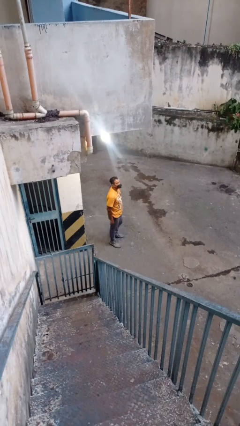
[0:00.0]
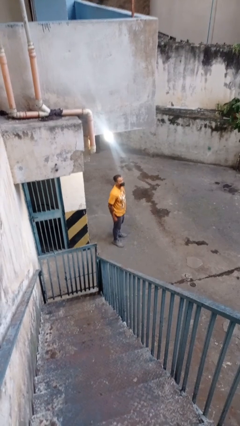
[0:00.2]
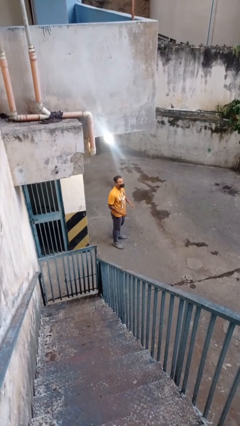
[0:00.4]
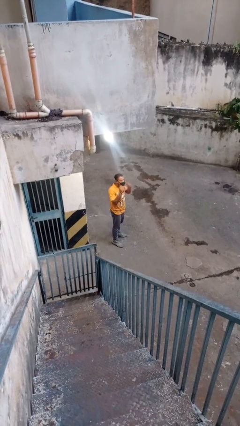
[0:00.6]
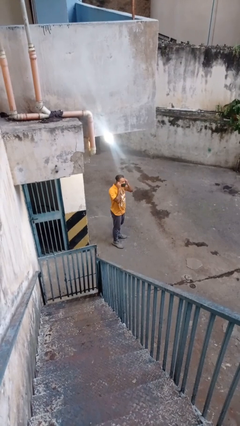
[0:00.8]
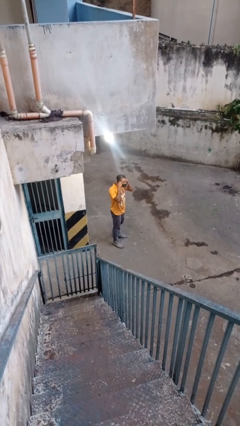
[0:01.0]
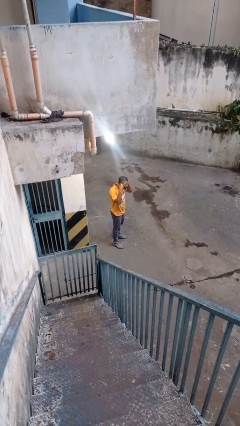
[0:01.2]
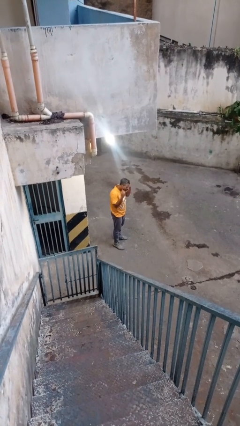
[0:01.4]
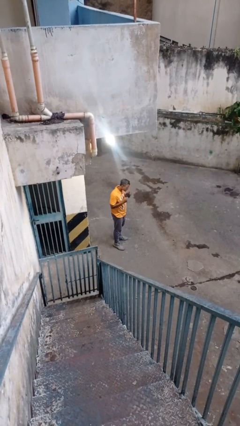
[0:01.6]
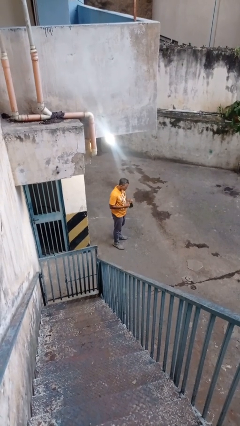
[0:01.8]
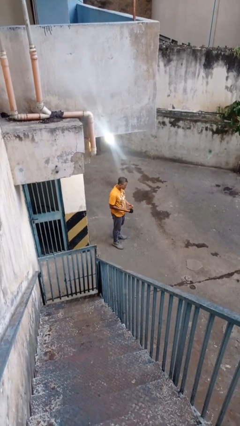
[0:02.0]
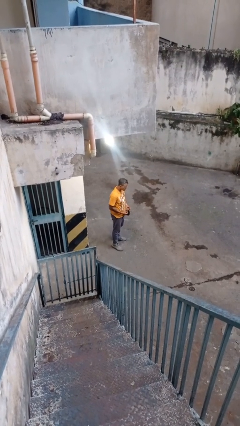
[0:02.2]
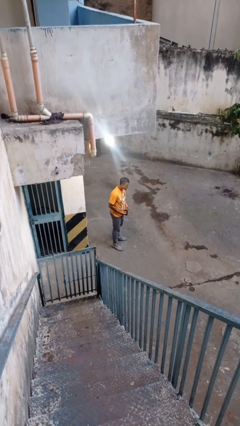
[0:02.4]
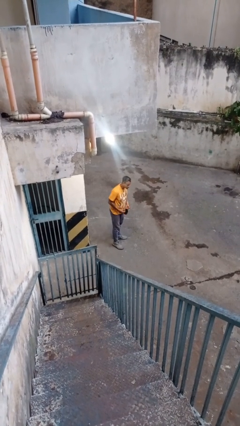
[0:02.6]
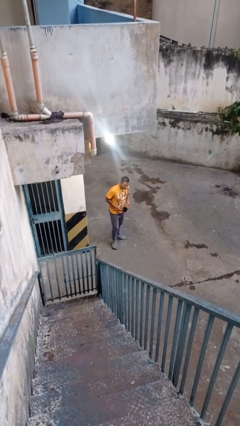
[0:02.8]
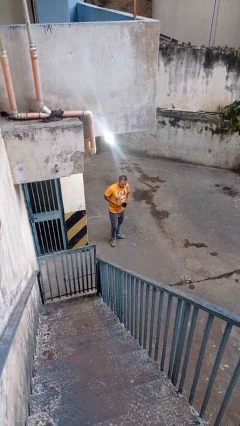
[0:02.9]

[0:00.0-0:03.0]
person takes off facemask

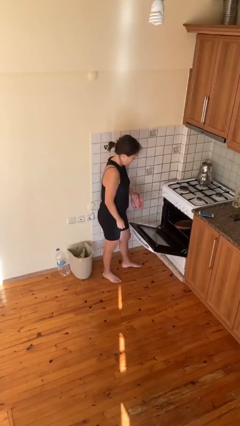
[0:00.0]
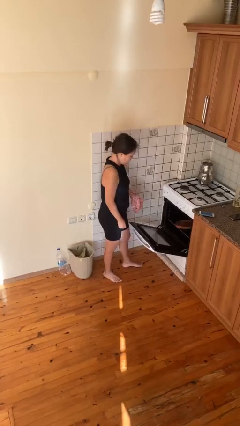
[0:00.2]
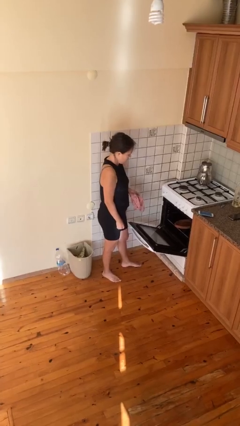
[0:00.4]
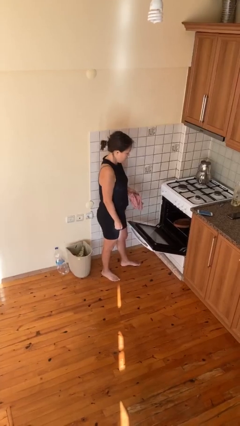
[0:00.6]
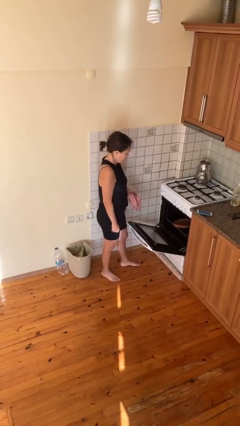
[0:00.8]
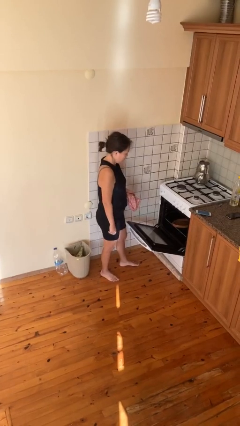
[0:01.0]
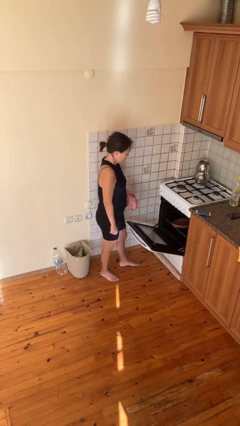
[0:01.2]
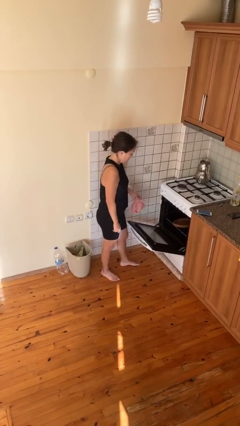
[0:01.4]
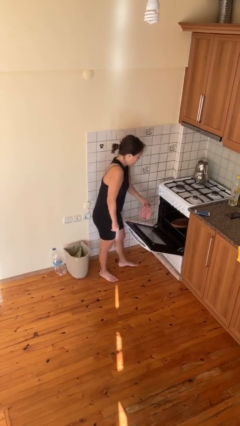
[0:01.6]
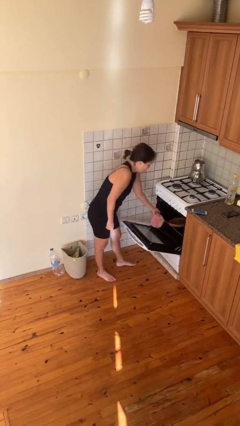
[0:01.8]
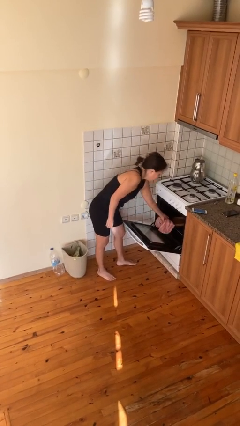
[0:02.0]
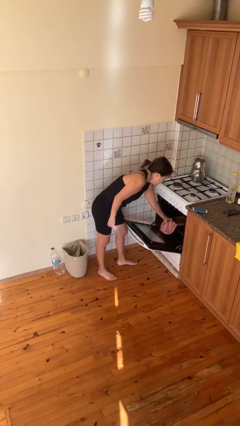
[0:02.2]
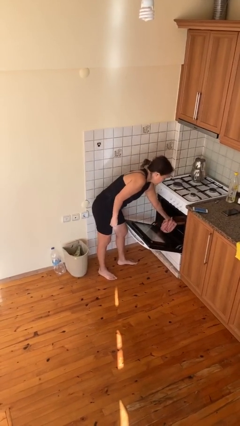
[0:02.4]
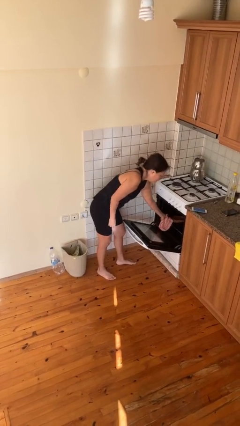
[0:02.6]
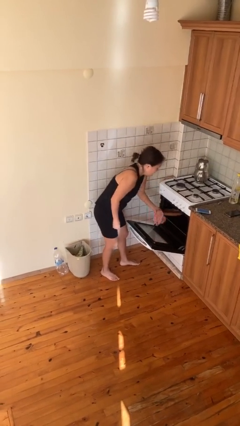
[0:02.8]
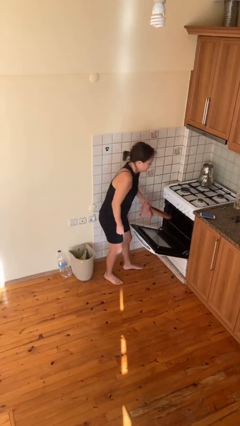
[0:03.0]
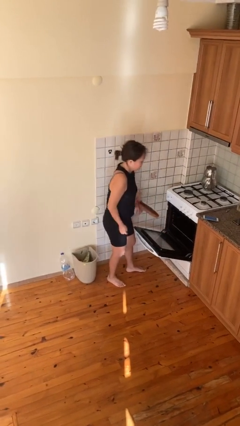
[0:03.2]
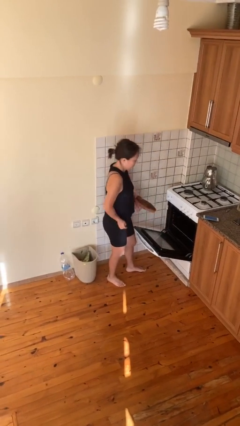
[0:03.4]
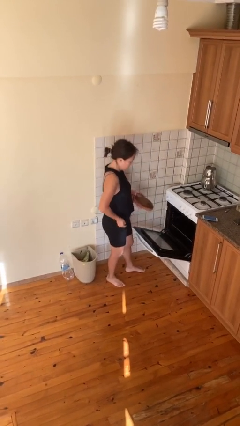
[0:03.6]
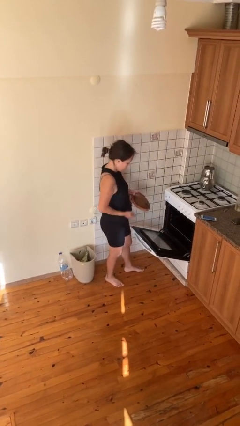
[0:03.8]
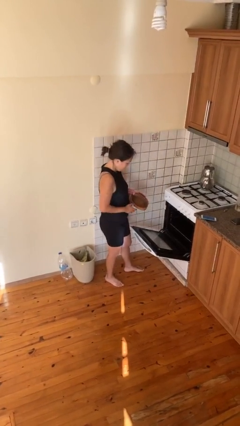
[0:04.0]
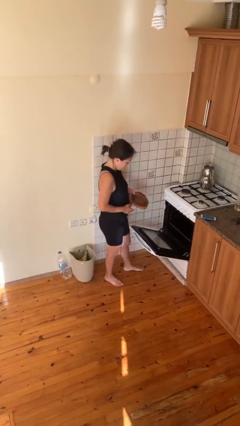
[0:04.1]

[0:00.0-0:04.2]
person takes object from oven

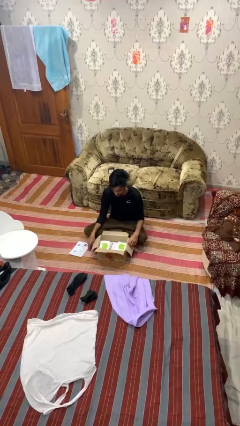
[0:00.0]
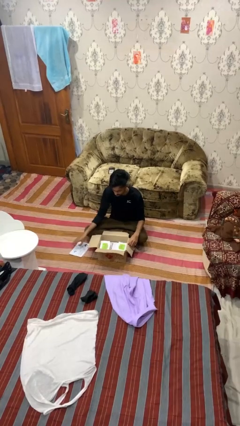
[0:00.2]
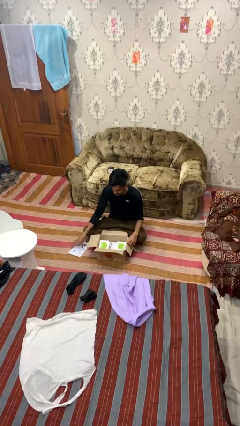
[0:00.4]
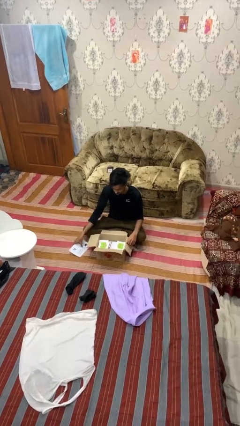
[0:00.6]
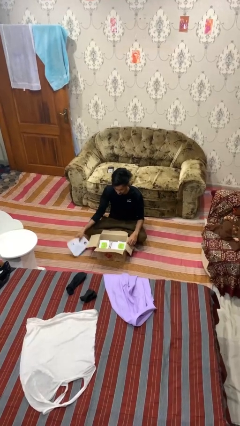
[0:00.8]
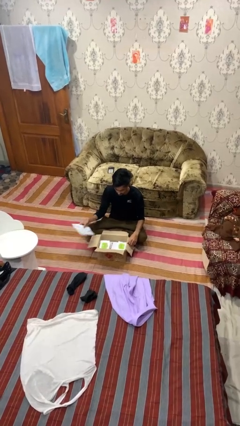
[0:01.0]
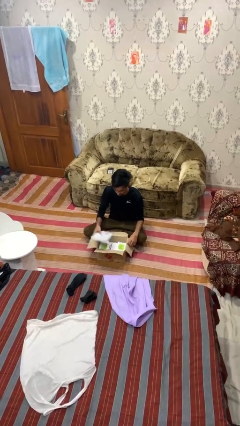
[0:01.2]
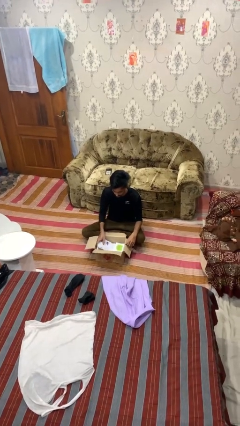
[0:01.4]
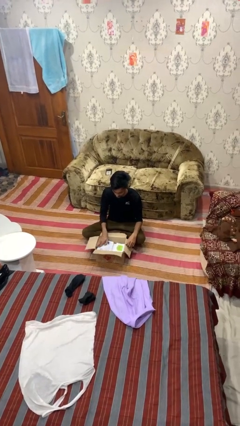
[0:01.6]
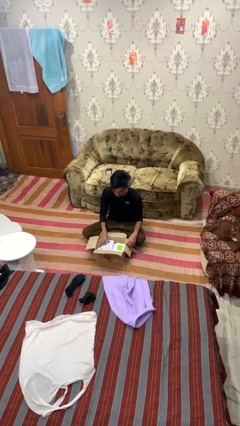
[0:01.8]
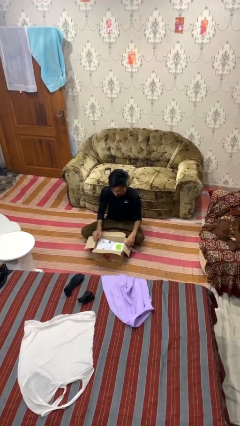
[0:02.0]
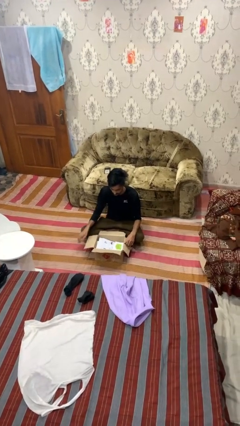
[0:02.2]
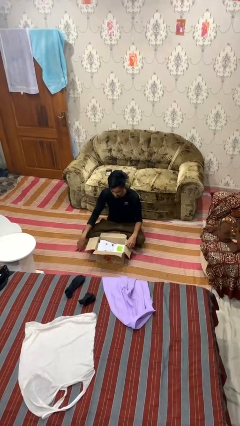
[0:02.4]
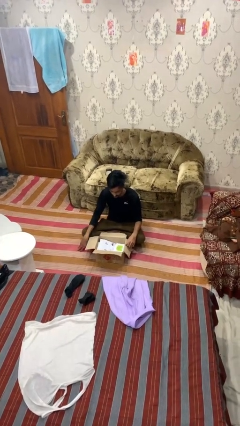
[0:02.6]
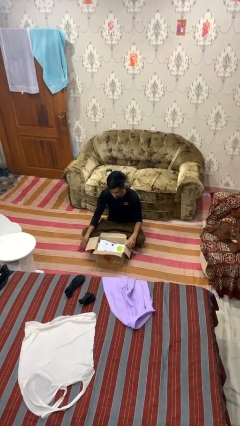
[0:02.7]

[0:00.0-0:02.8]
person puts object into box

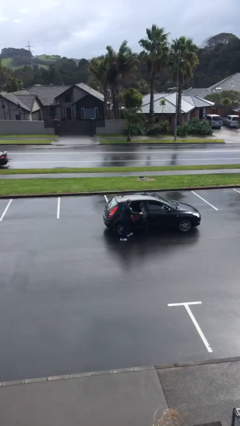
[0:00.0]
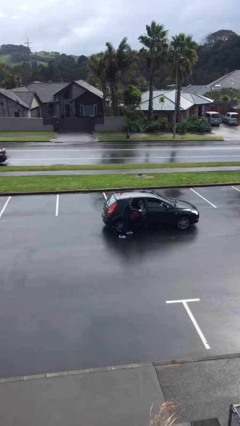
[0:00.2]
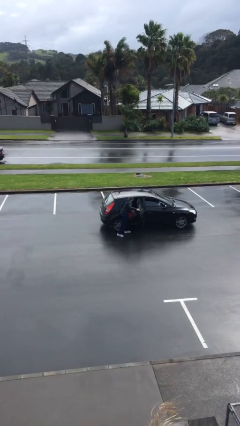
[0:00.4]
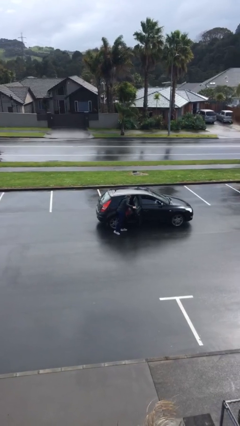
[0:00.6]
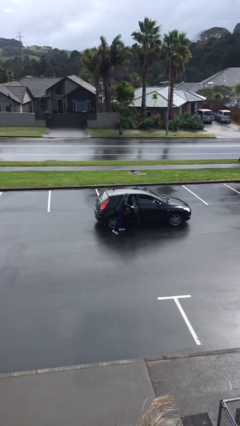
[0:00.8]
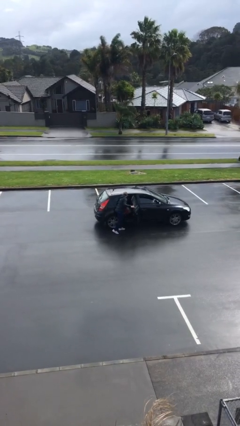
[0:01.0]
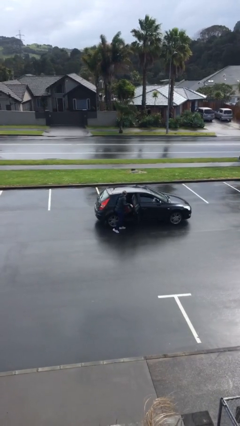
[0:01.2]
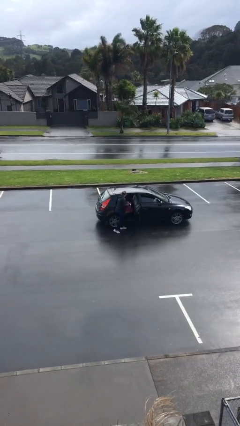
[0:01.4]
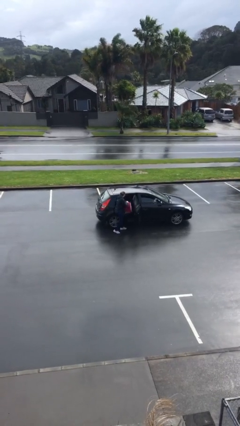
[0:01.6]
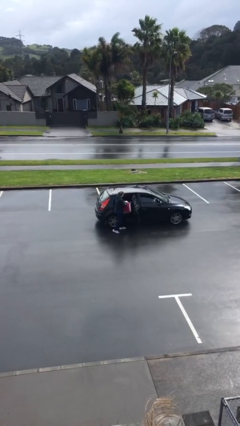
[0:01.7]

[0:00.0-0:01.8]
person unloads car

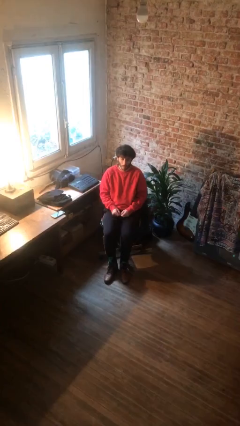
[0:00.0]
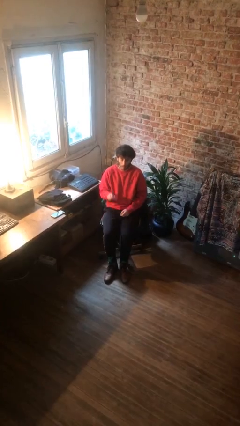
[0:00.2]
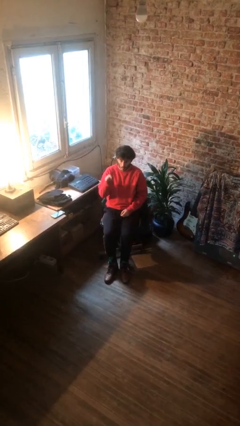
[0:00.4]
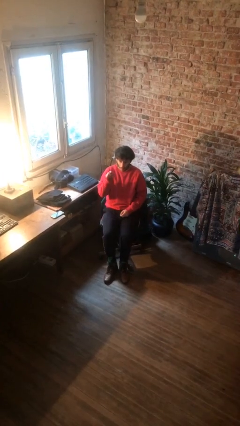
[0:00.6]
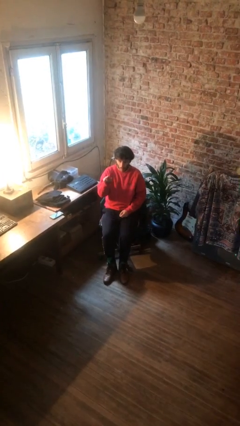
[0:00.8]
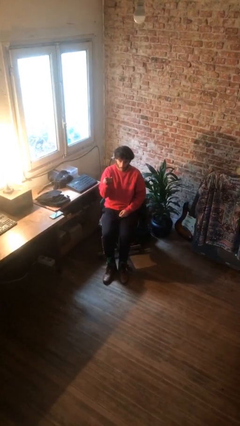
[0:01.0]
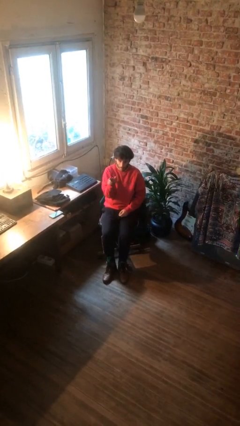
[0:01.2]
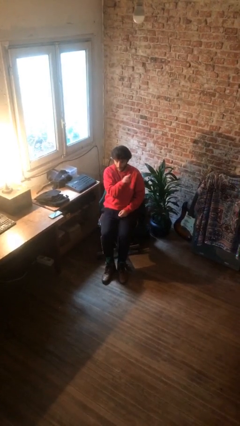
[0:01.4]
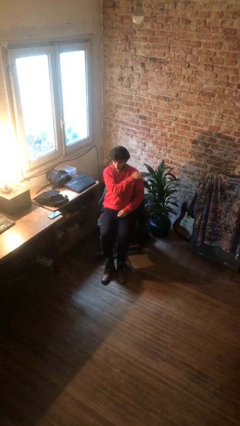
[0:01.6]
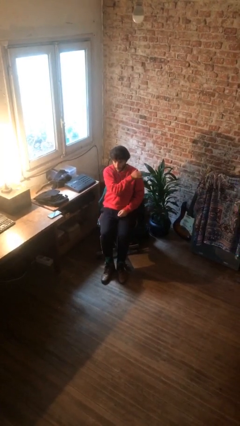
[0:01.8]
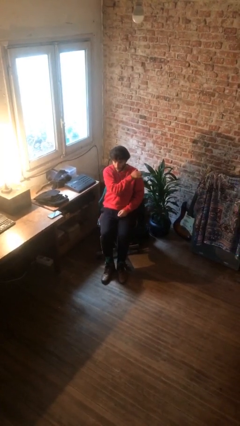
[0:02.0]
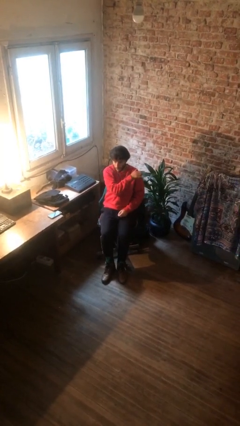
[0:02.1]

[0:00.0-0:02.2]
person gestures swipe left

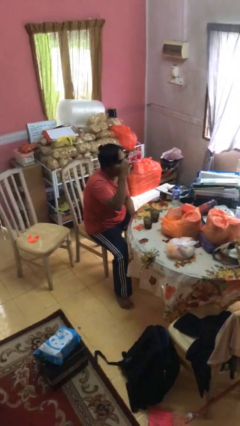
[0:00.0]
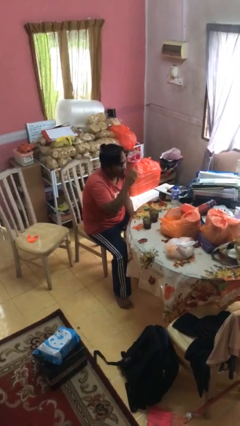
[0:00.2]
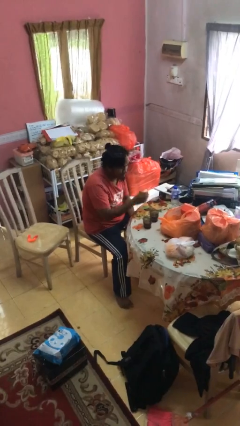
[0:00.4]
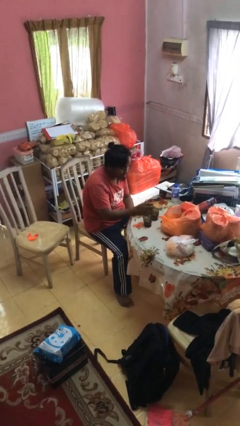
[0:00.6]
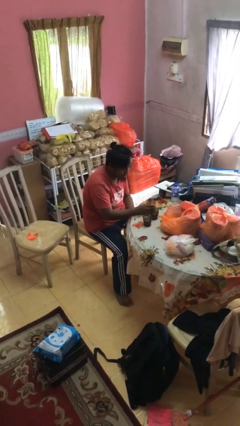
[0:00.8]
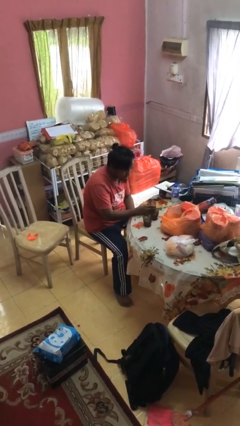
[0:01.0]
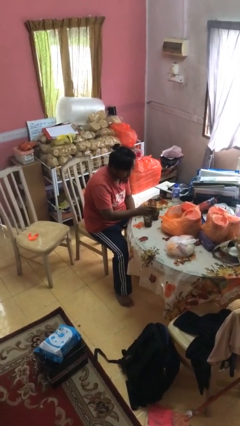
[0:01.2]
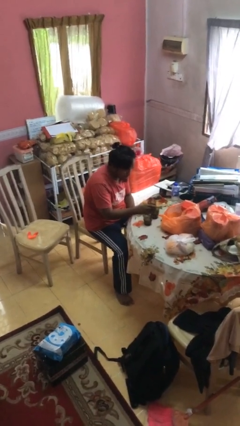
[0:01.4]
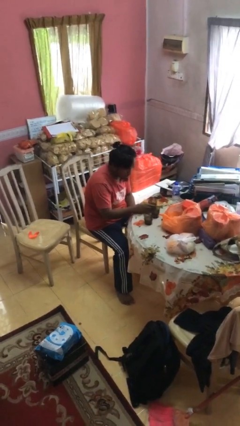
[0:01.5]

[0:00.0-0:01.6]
person puts down object on table

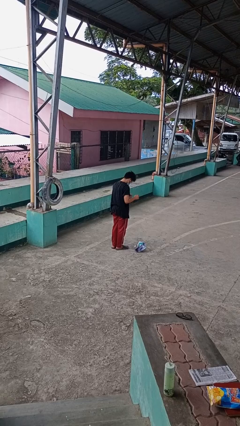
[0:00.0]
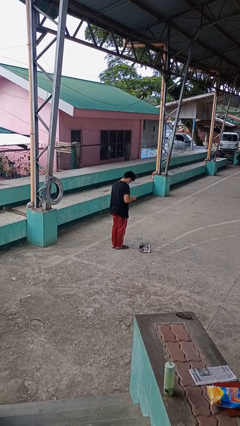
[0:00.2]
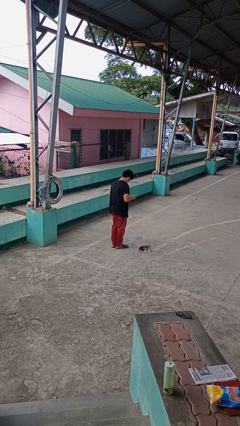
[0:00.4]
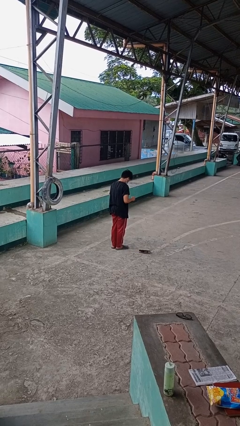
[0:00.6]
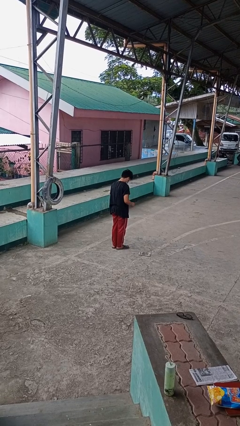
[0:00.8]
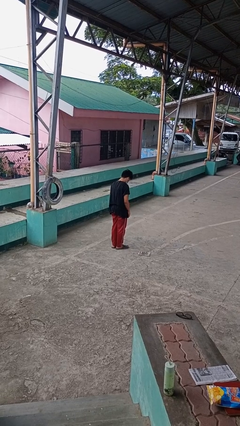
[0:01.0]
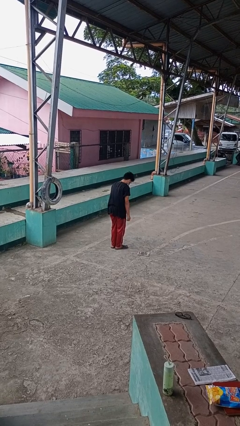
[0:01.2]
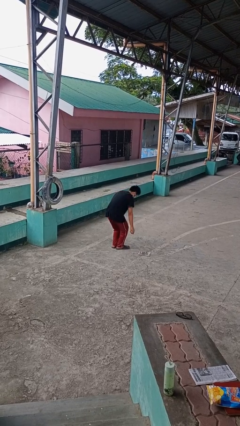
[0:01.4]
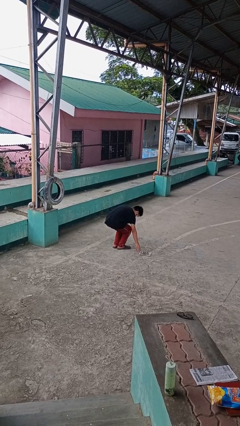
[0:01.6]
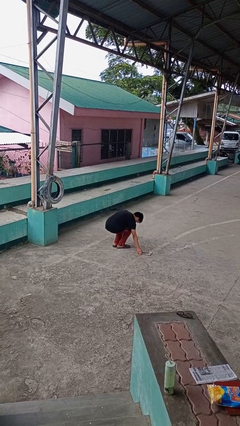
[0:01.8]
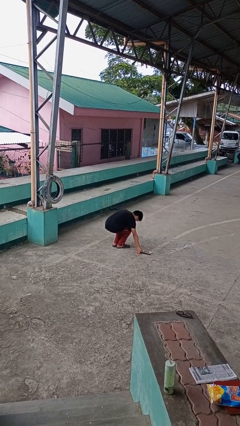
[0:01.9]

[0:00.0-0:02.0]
person drops object
